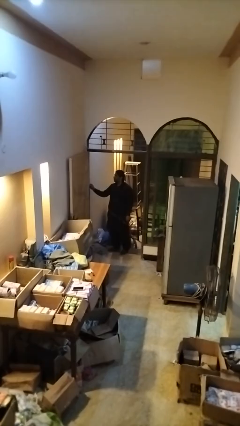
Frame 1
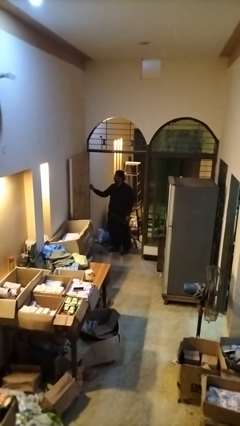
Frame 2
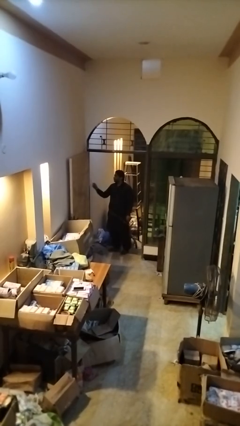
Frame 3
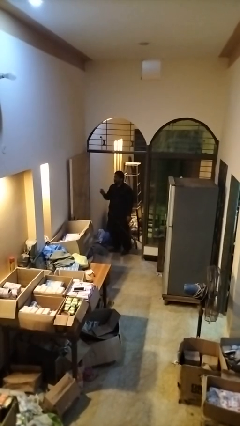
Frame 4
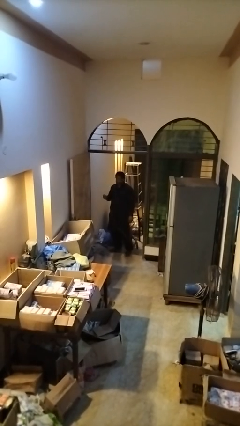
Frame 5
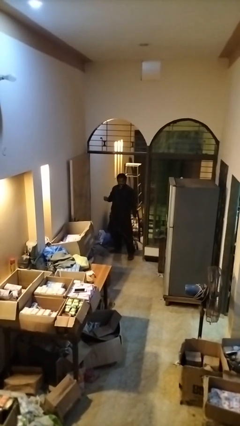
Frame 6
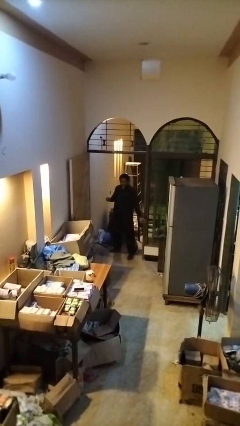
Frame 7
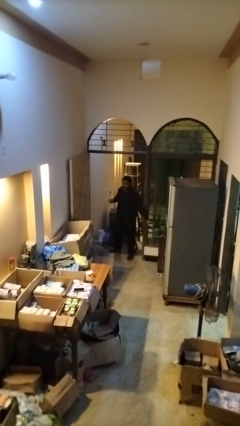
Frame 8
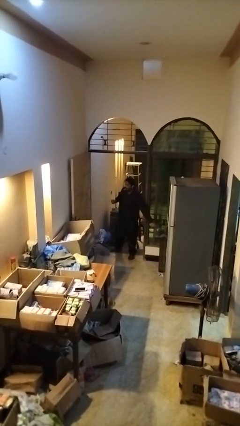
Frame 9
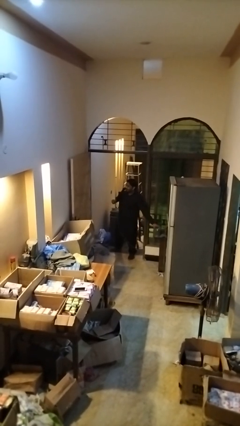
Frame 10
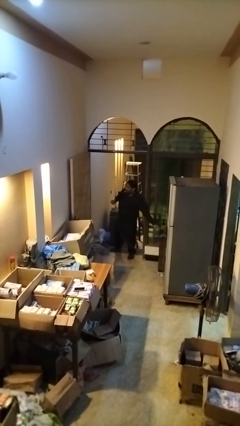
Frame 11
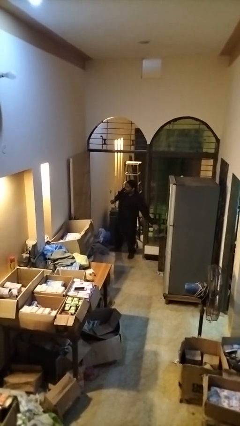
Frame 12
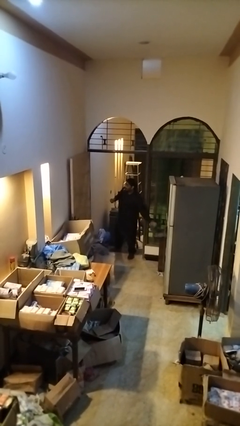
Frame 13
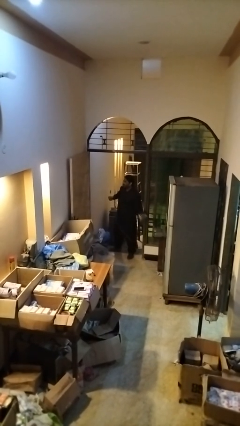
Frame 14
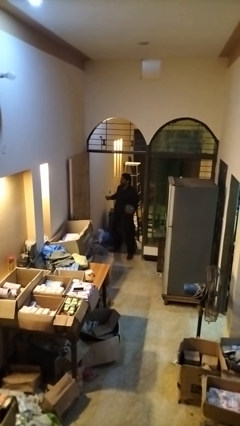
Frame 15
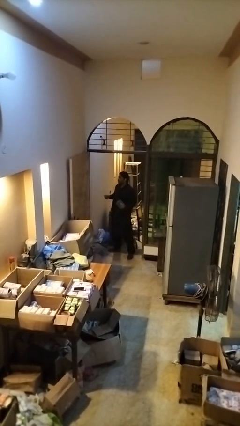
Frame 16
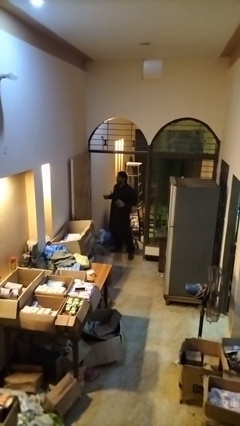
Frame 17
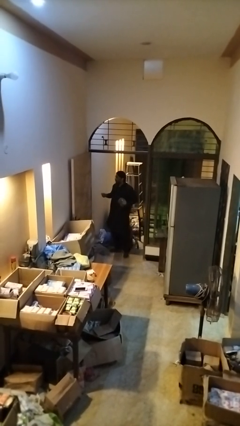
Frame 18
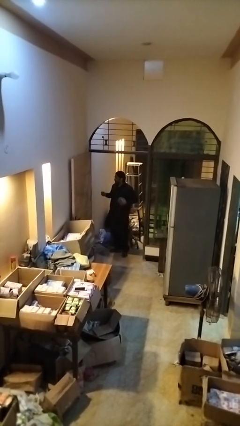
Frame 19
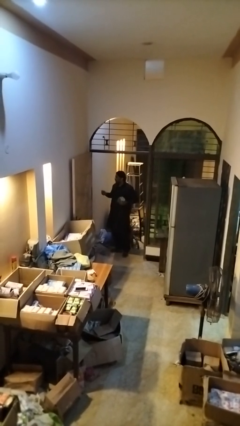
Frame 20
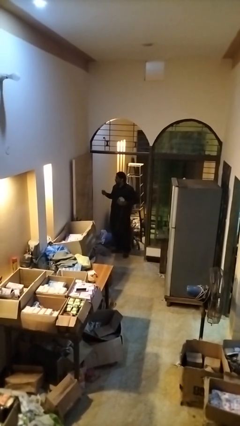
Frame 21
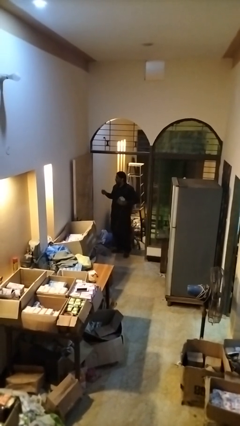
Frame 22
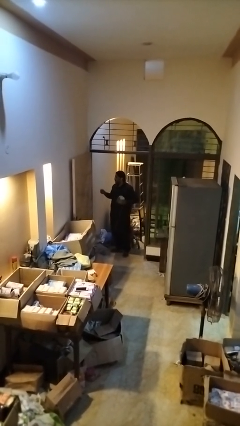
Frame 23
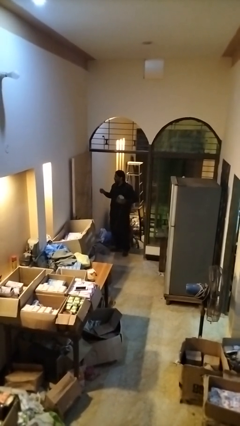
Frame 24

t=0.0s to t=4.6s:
person unplugs from electrical socket

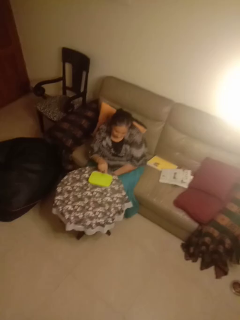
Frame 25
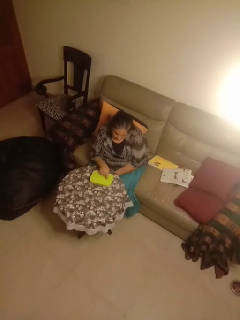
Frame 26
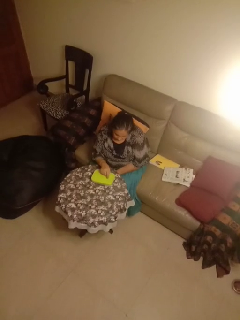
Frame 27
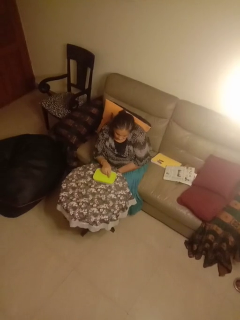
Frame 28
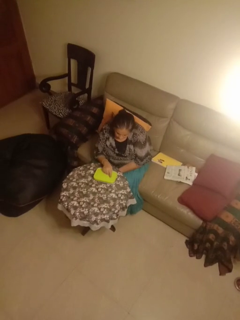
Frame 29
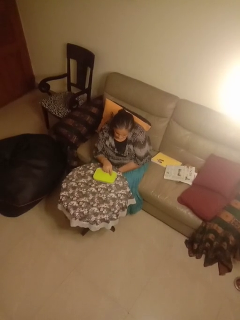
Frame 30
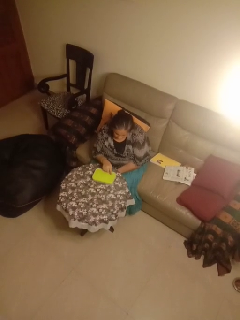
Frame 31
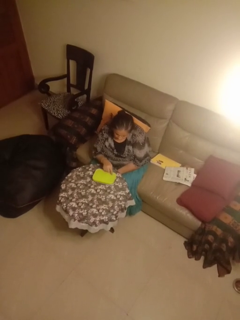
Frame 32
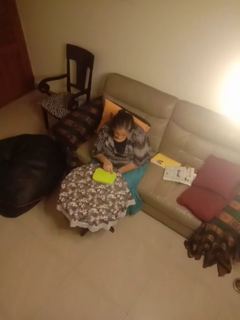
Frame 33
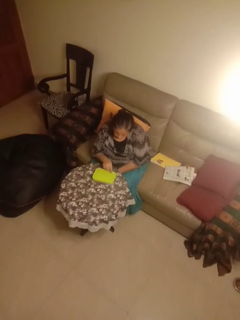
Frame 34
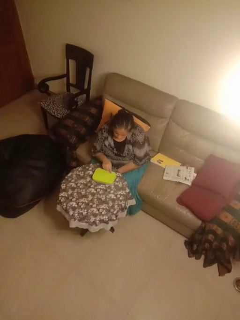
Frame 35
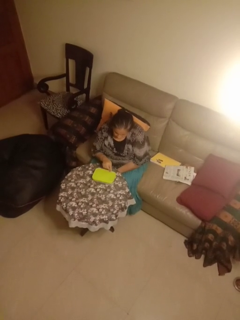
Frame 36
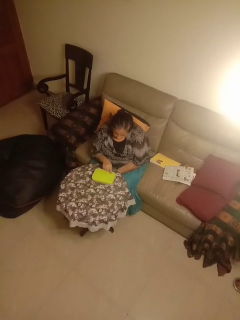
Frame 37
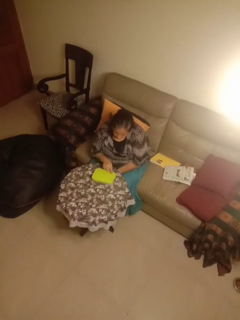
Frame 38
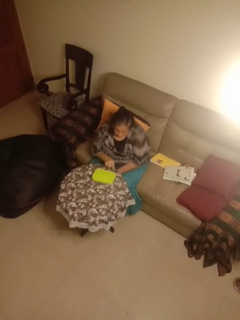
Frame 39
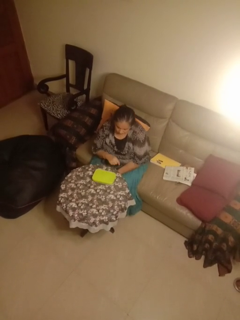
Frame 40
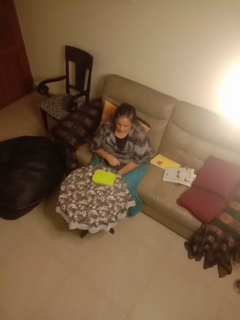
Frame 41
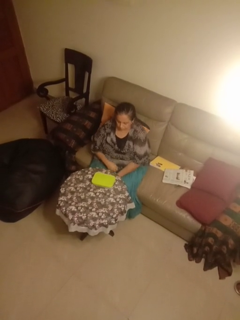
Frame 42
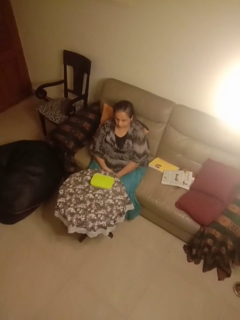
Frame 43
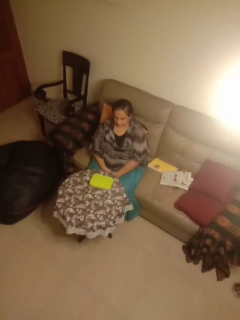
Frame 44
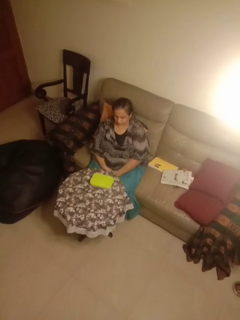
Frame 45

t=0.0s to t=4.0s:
person taps object with finger

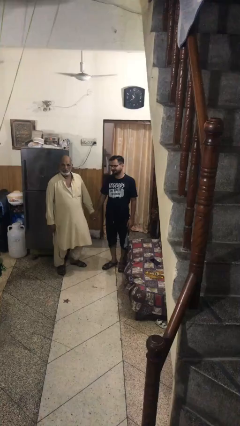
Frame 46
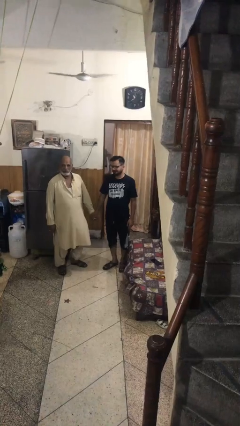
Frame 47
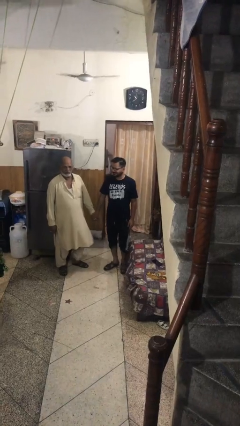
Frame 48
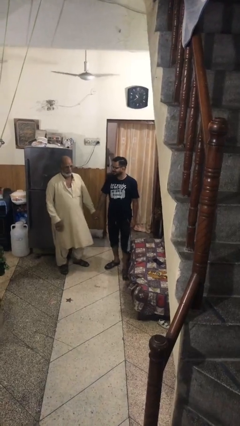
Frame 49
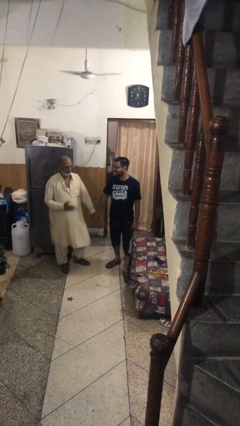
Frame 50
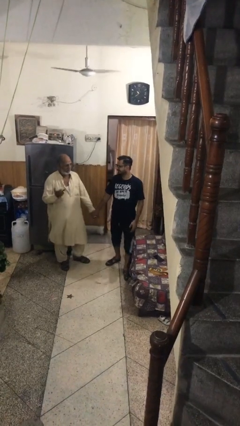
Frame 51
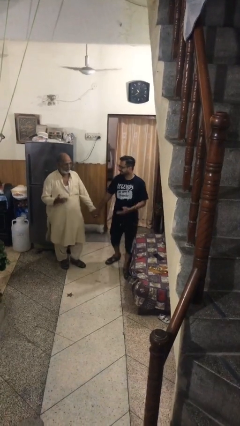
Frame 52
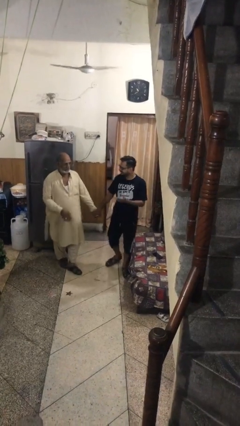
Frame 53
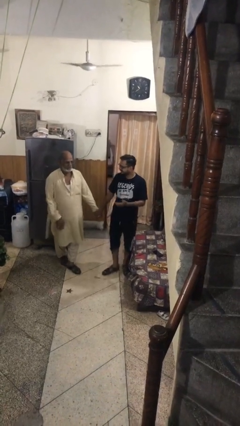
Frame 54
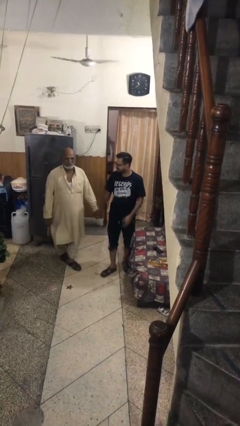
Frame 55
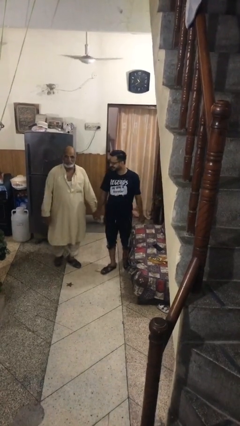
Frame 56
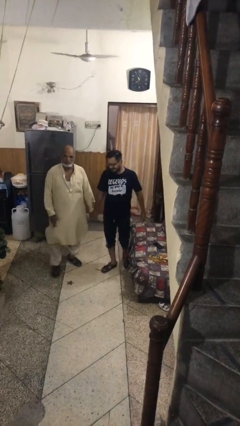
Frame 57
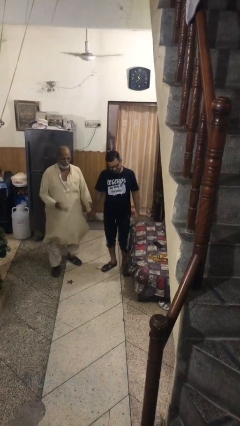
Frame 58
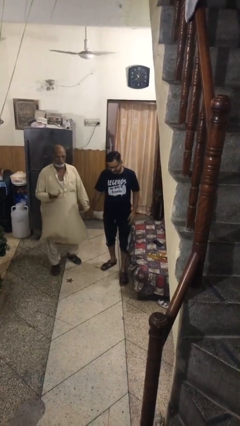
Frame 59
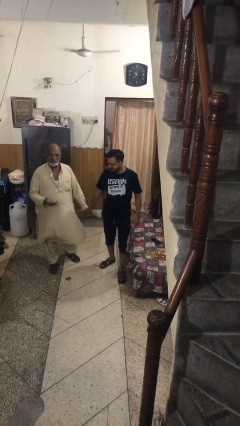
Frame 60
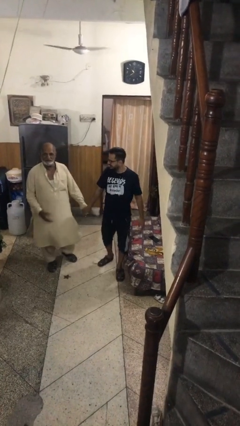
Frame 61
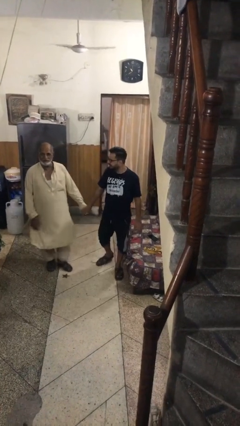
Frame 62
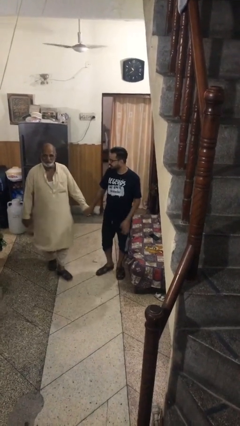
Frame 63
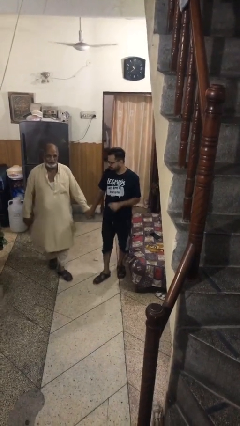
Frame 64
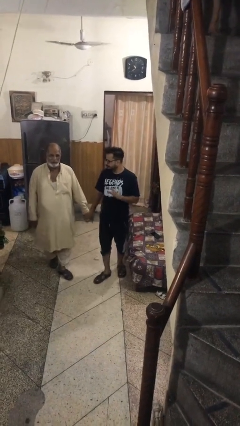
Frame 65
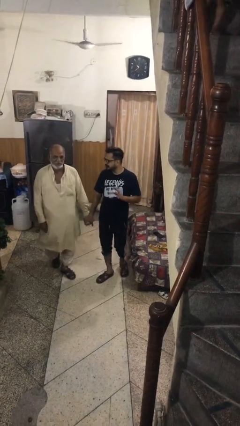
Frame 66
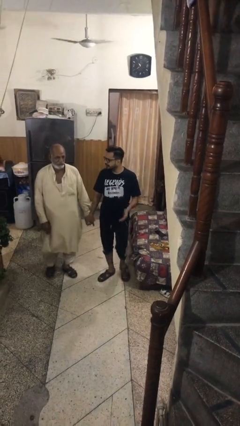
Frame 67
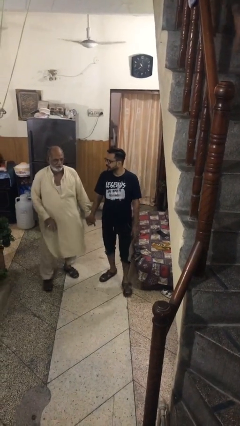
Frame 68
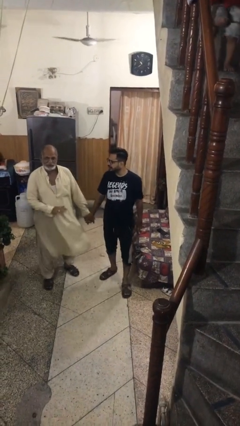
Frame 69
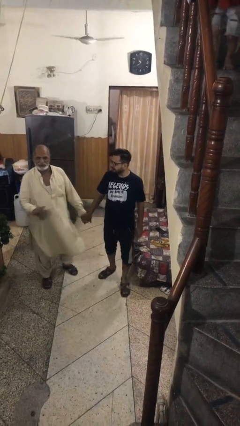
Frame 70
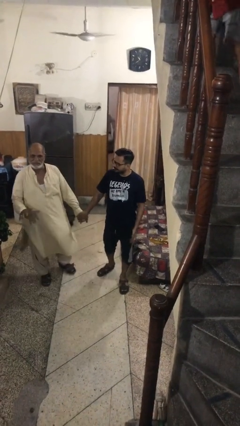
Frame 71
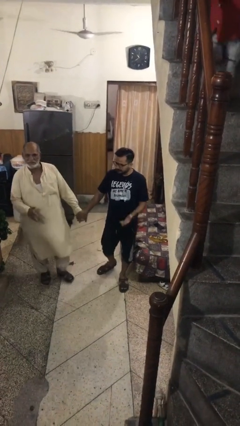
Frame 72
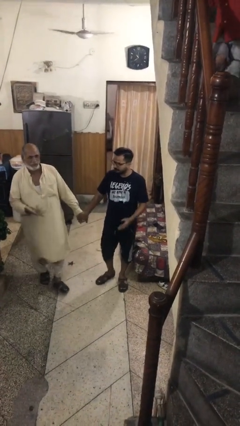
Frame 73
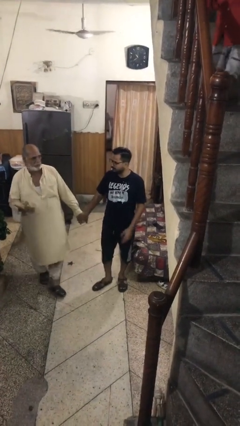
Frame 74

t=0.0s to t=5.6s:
person holds hand

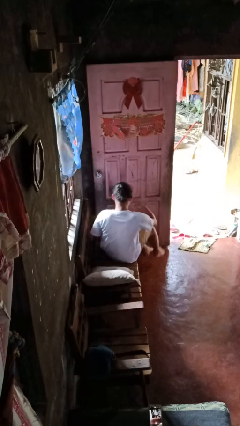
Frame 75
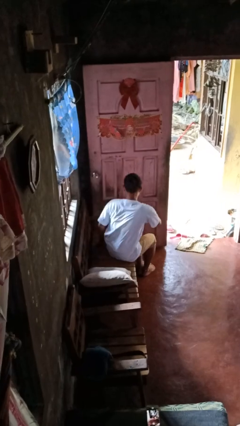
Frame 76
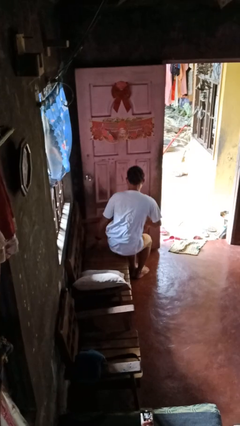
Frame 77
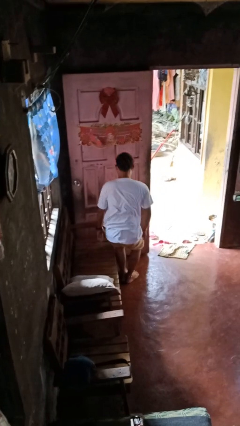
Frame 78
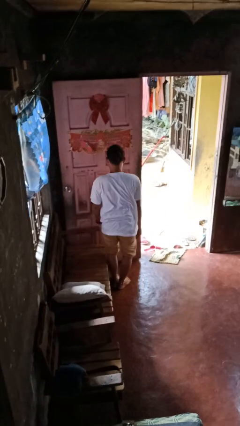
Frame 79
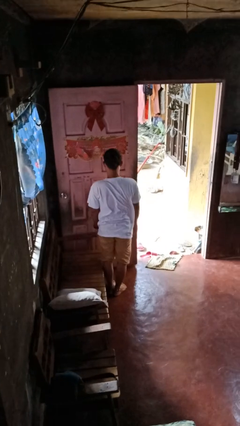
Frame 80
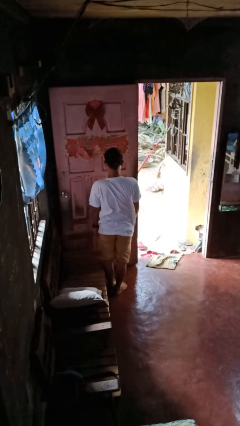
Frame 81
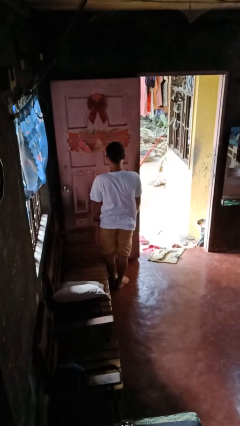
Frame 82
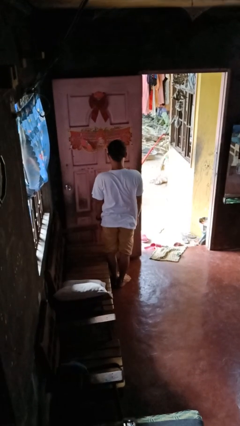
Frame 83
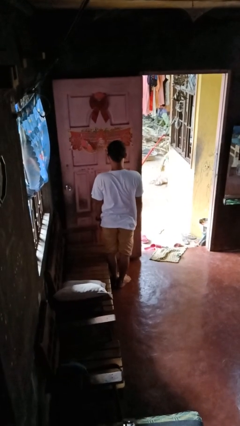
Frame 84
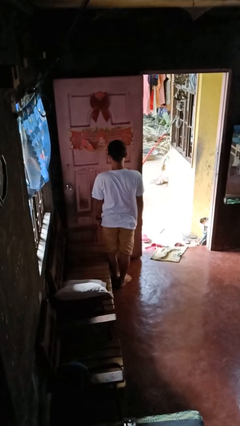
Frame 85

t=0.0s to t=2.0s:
person stands up

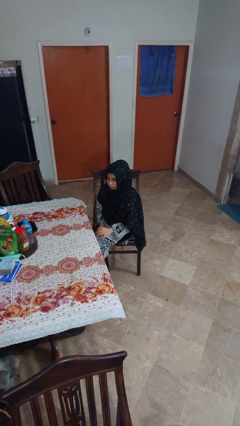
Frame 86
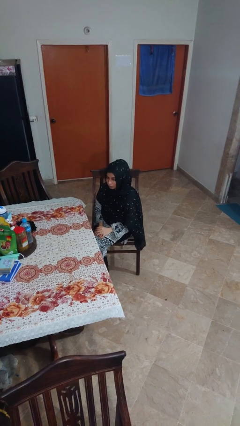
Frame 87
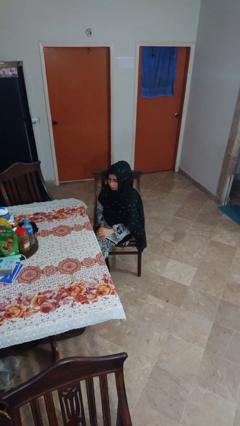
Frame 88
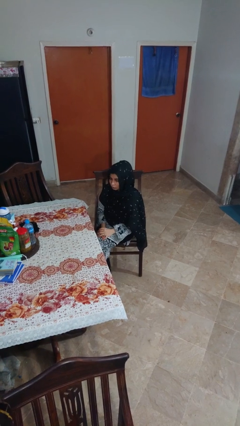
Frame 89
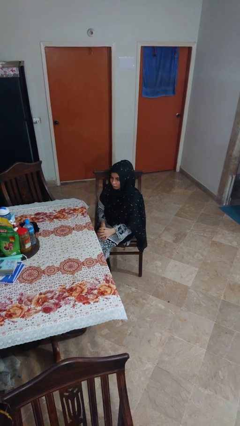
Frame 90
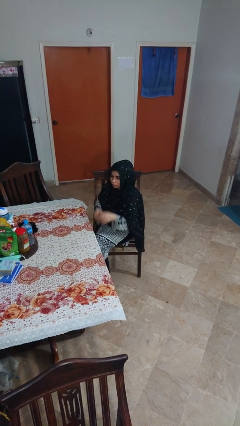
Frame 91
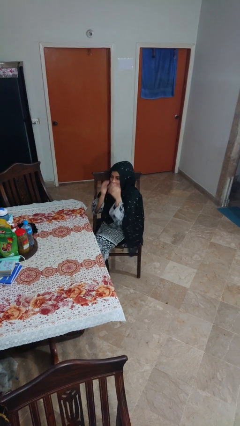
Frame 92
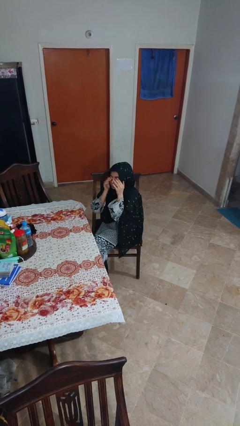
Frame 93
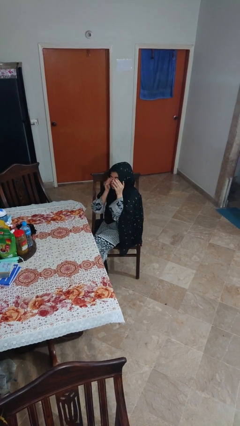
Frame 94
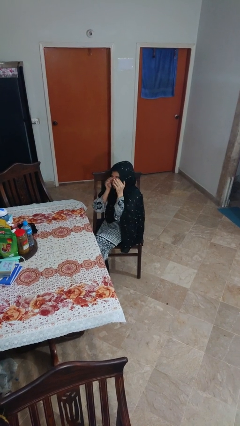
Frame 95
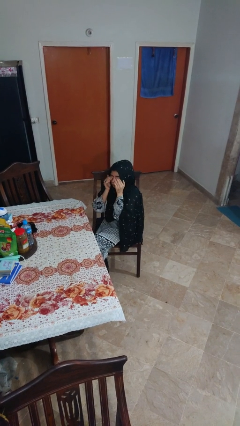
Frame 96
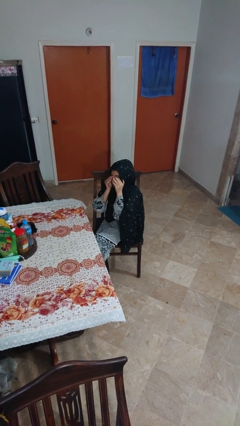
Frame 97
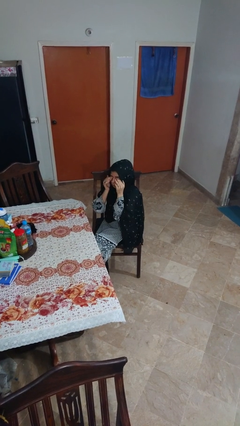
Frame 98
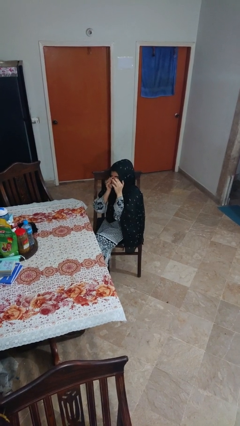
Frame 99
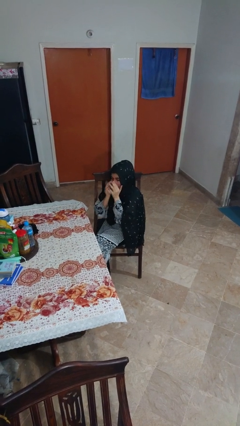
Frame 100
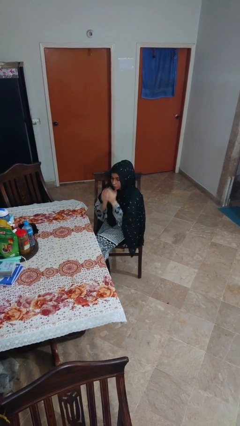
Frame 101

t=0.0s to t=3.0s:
person rubs eyes
